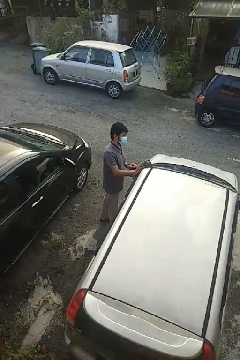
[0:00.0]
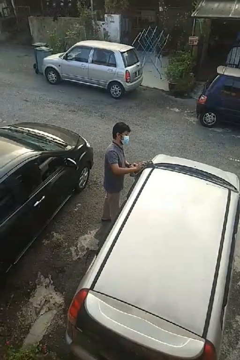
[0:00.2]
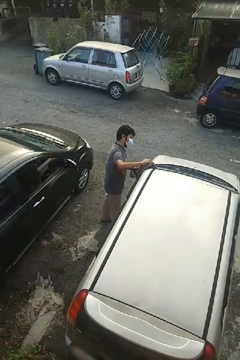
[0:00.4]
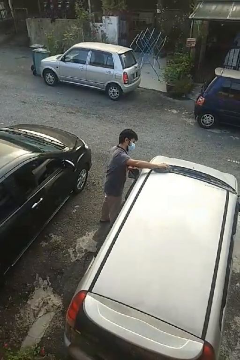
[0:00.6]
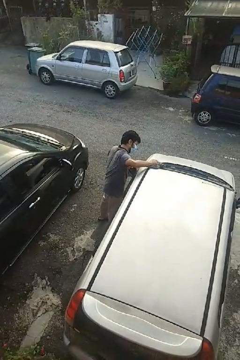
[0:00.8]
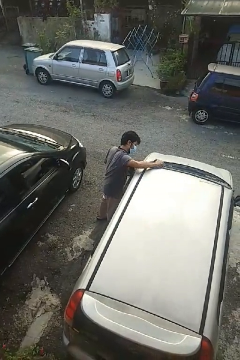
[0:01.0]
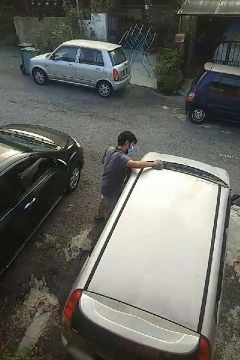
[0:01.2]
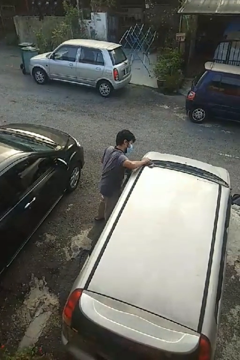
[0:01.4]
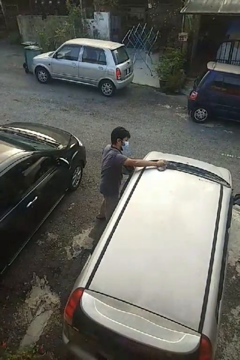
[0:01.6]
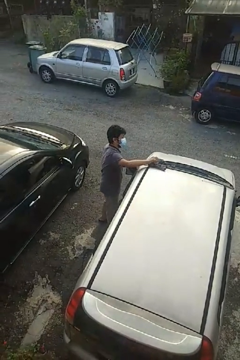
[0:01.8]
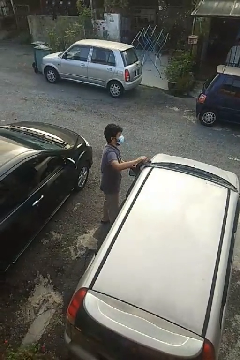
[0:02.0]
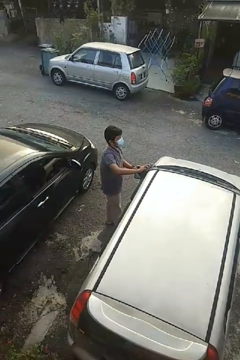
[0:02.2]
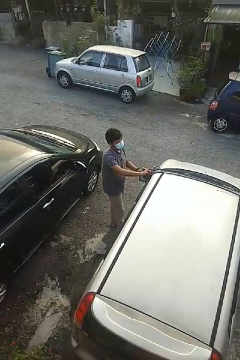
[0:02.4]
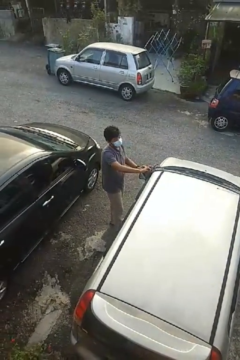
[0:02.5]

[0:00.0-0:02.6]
person polishes car with rag

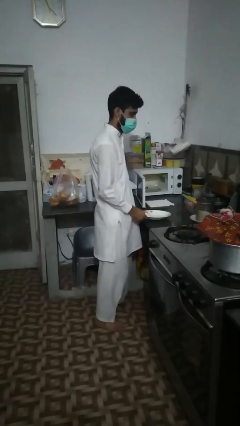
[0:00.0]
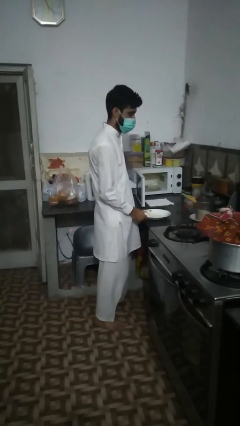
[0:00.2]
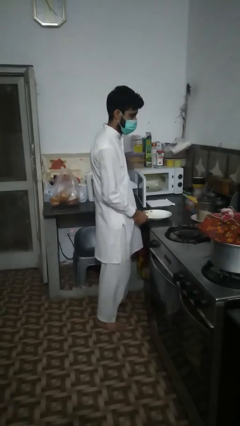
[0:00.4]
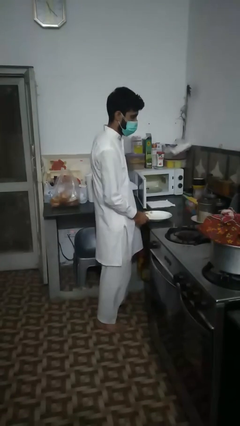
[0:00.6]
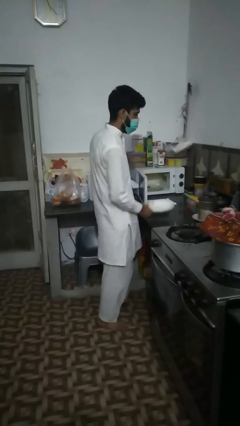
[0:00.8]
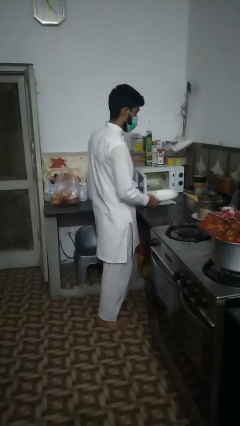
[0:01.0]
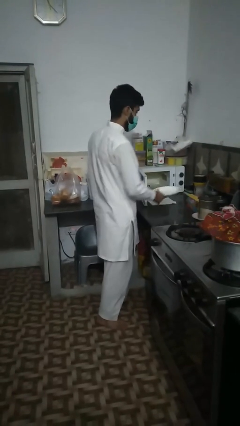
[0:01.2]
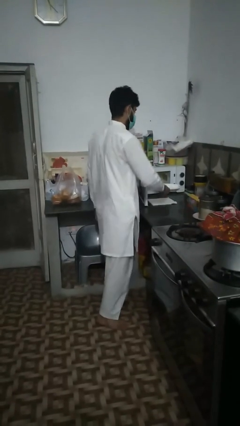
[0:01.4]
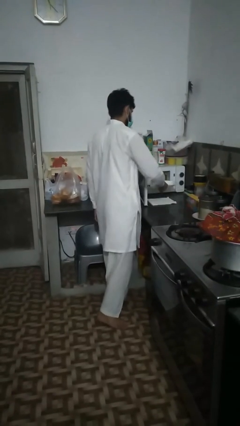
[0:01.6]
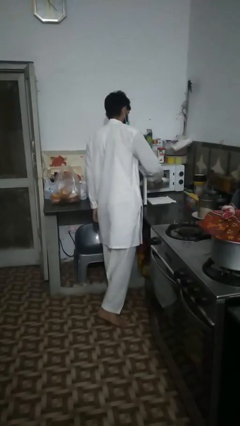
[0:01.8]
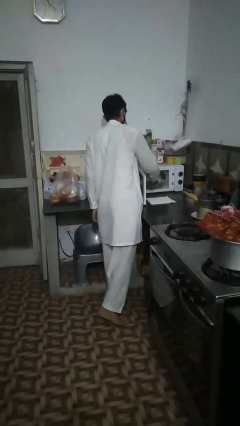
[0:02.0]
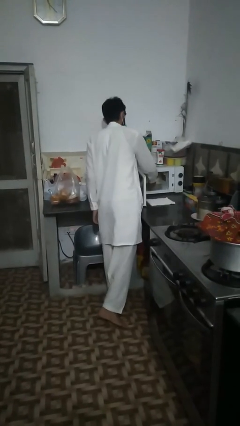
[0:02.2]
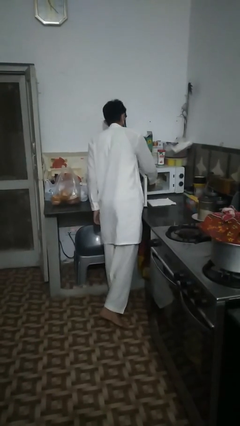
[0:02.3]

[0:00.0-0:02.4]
person puts object into microwave

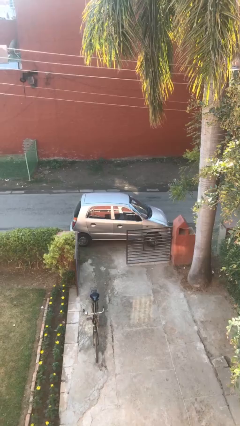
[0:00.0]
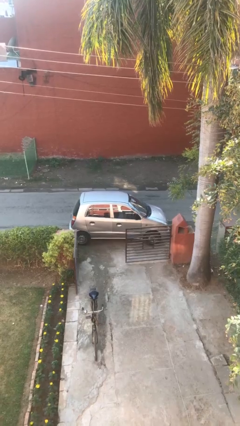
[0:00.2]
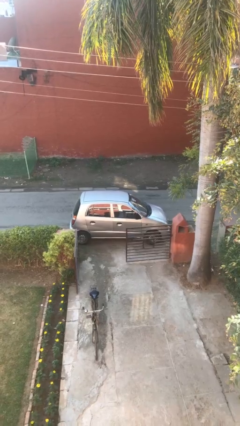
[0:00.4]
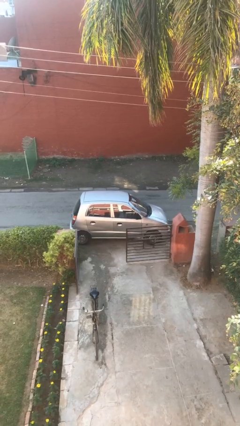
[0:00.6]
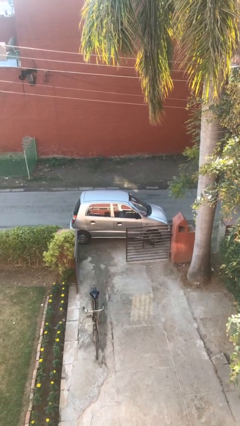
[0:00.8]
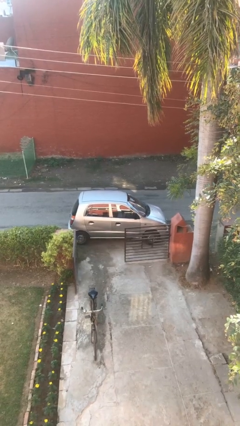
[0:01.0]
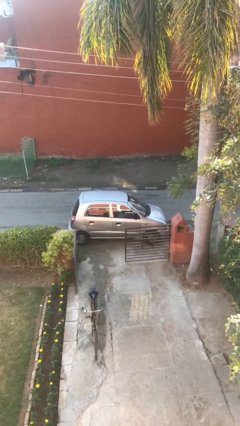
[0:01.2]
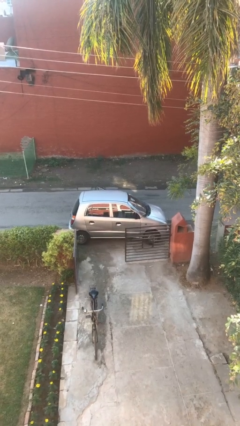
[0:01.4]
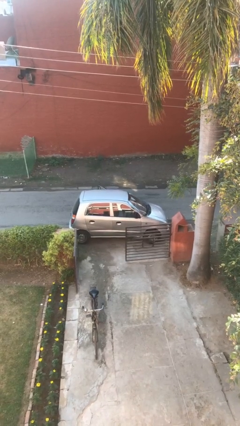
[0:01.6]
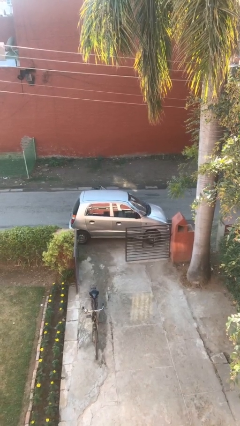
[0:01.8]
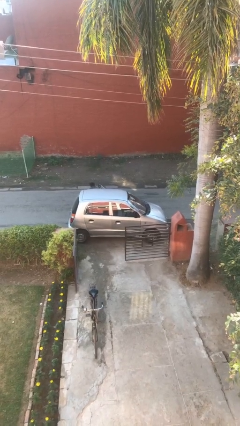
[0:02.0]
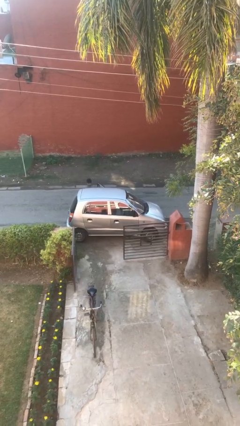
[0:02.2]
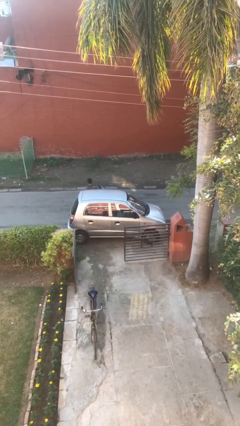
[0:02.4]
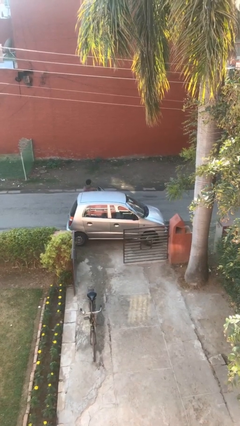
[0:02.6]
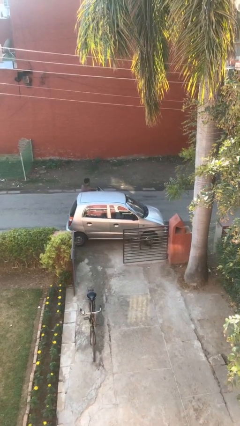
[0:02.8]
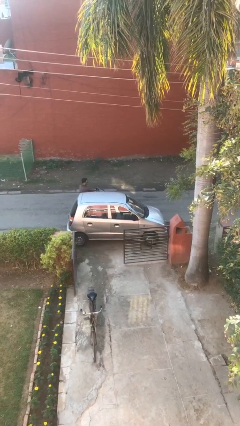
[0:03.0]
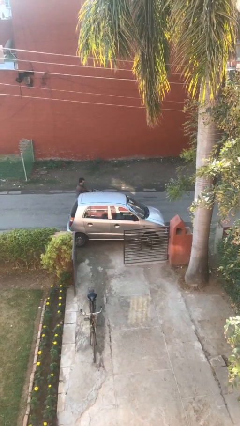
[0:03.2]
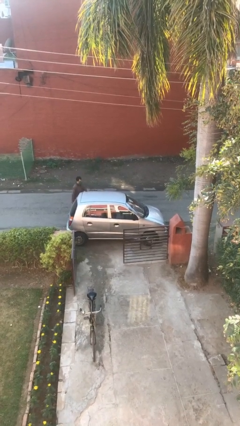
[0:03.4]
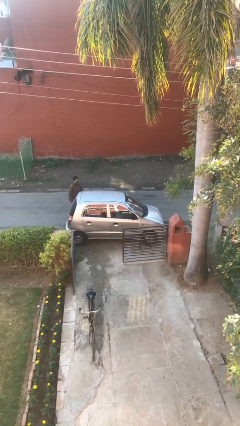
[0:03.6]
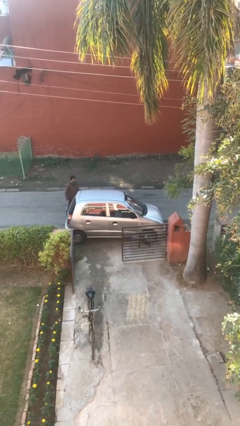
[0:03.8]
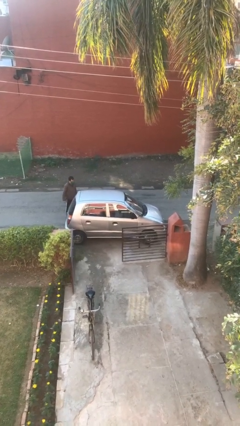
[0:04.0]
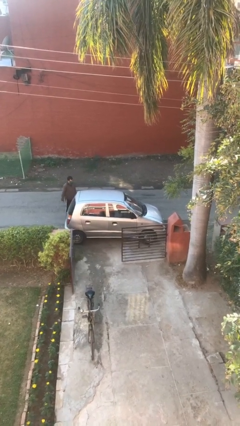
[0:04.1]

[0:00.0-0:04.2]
car drops off person

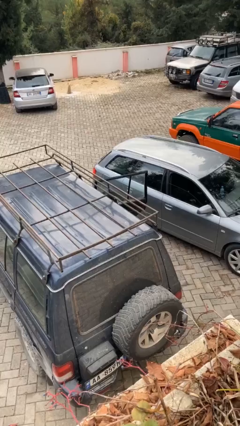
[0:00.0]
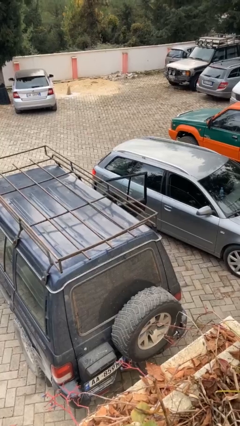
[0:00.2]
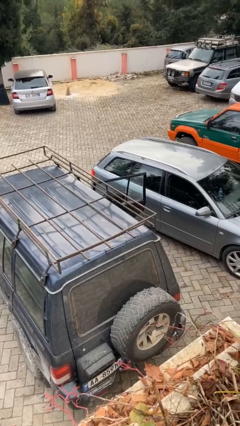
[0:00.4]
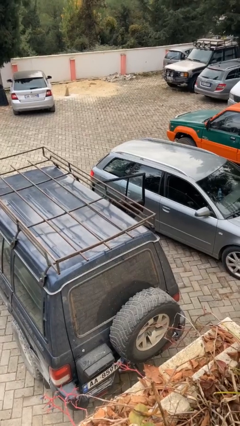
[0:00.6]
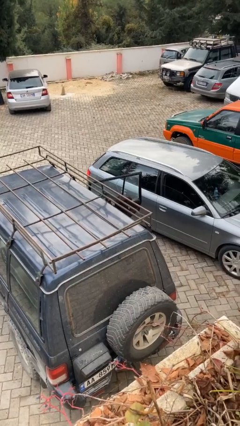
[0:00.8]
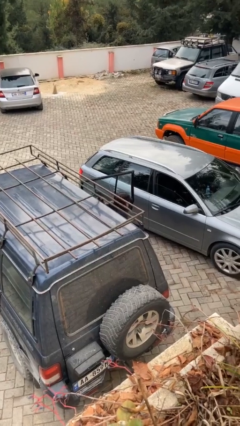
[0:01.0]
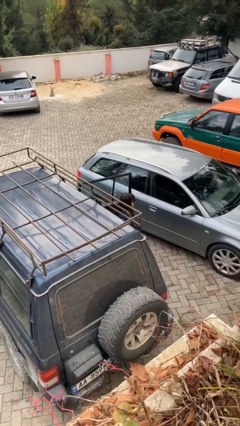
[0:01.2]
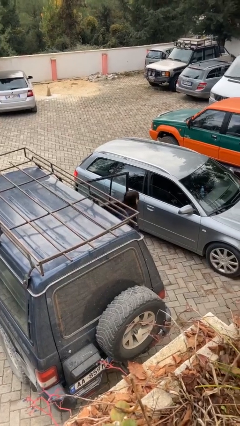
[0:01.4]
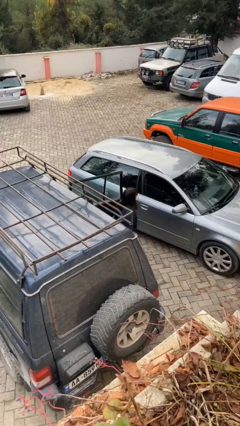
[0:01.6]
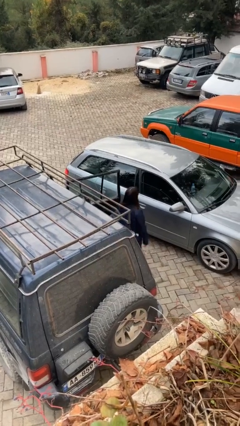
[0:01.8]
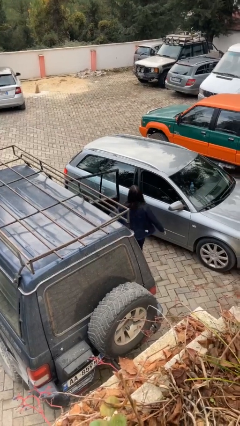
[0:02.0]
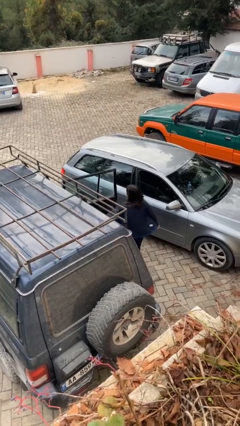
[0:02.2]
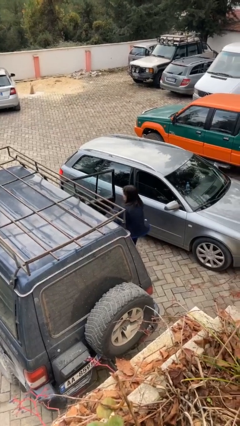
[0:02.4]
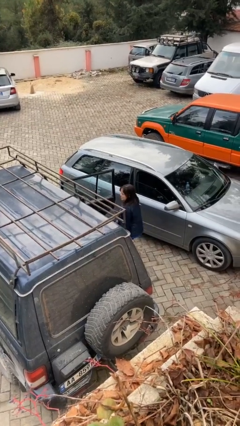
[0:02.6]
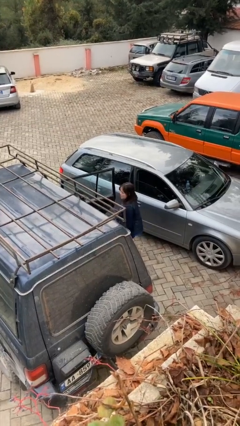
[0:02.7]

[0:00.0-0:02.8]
person exits car

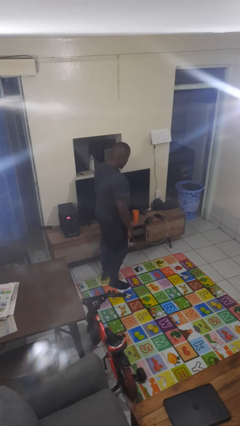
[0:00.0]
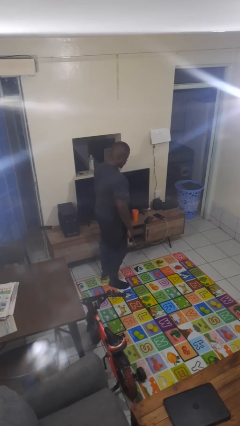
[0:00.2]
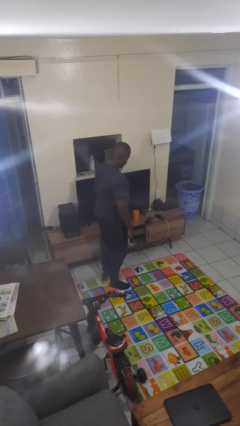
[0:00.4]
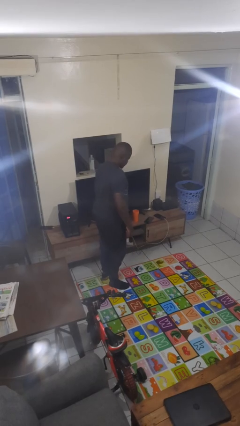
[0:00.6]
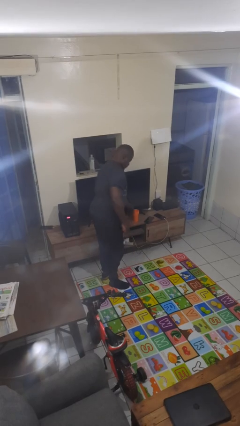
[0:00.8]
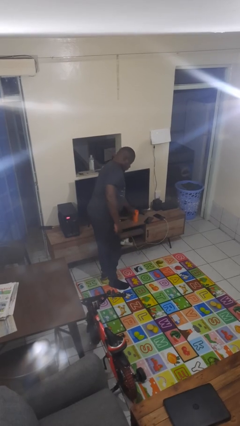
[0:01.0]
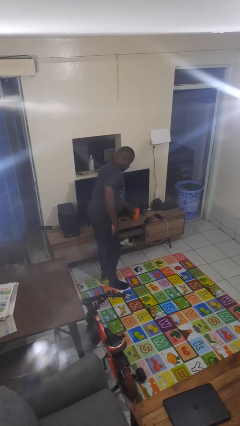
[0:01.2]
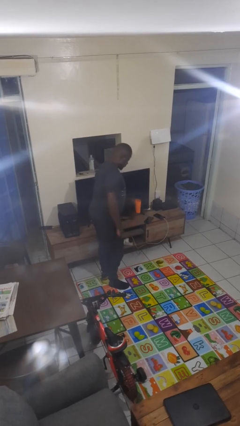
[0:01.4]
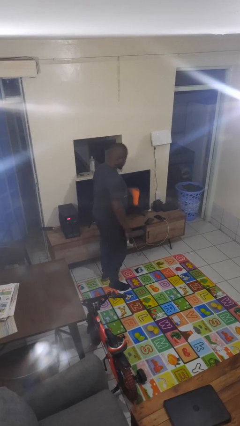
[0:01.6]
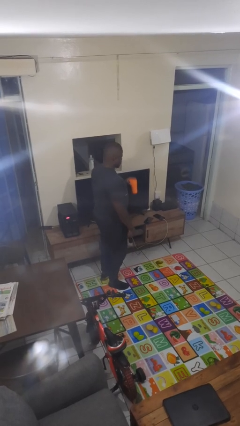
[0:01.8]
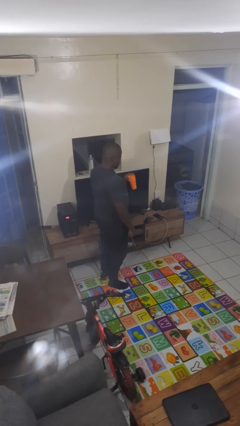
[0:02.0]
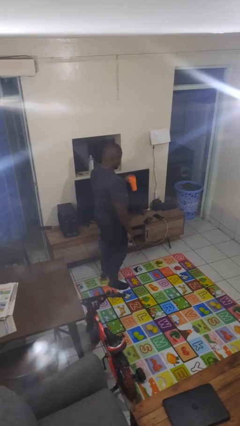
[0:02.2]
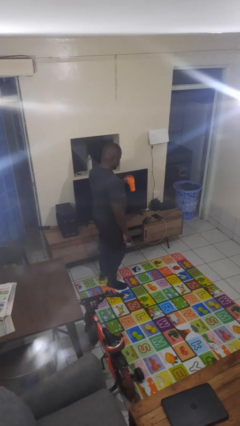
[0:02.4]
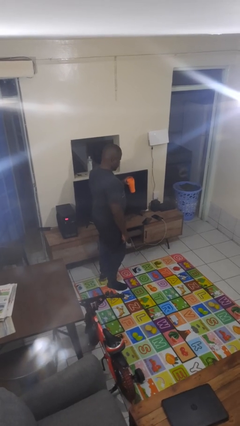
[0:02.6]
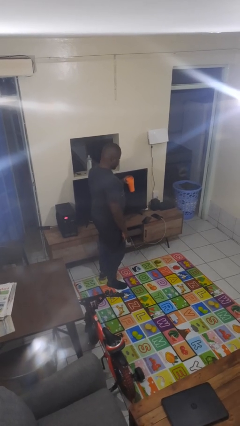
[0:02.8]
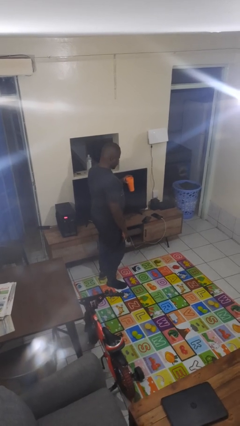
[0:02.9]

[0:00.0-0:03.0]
person picks up object from countertop

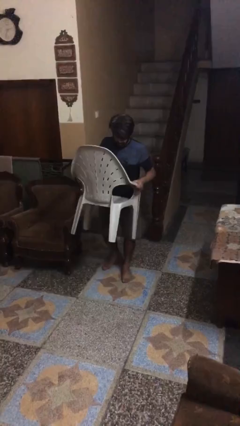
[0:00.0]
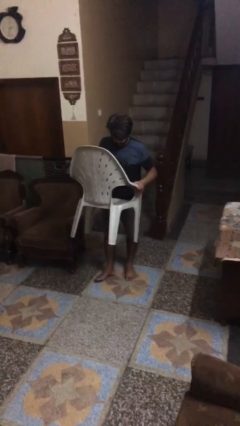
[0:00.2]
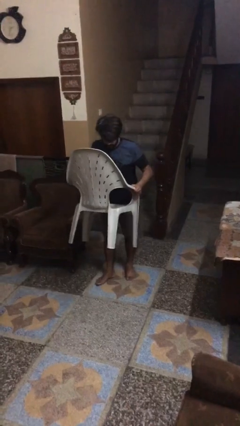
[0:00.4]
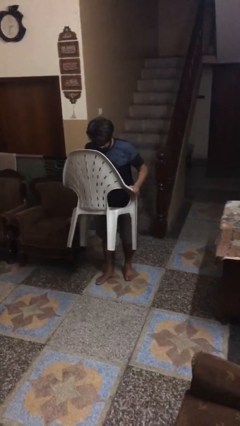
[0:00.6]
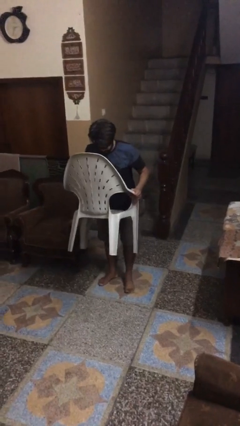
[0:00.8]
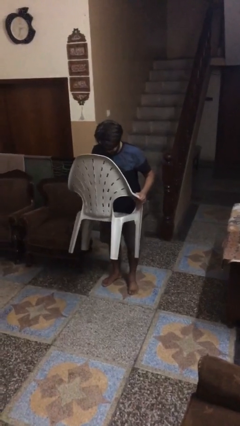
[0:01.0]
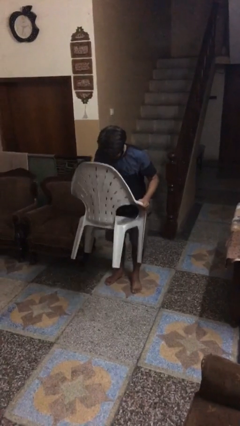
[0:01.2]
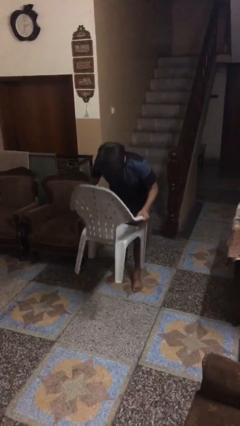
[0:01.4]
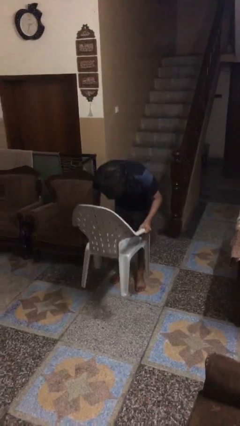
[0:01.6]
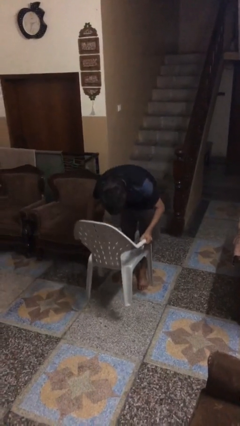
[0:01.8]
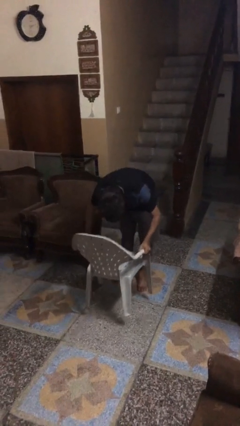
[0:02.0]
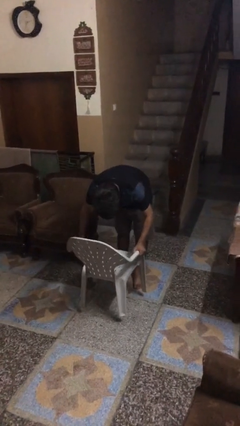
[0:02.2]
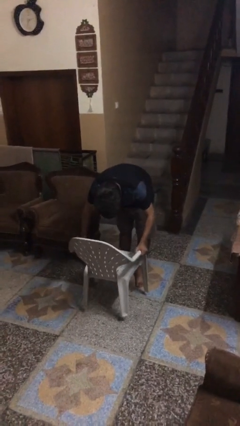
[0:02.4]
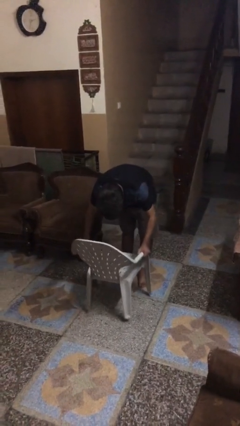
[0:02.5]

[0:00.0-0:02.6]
person carries heavy object
